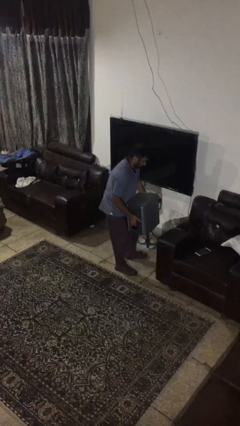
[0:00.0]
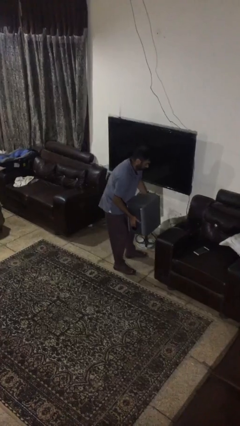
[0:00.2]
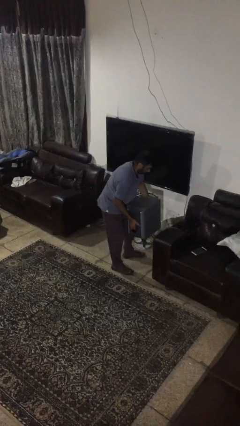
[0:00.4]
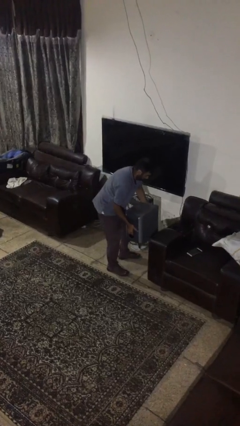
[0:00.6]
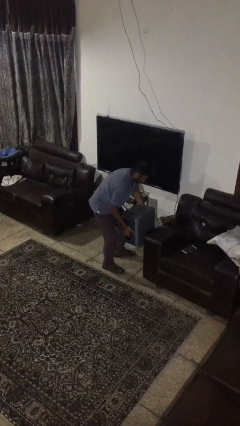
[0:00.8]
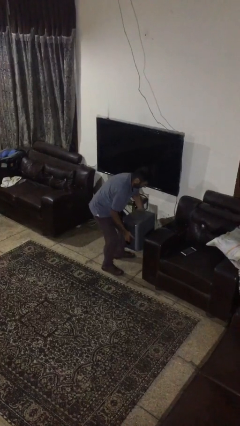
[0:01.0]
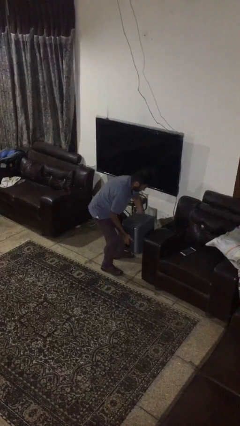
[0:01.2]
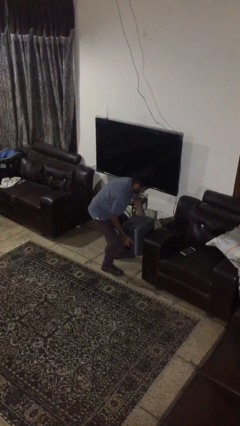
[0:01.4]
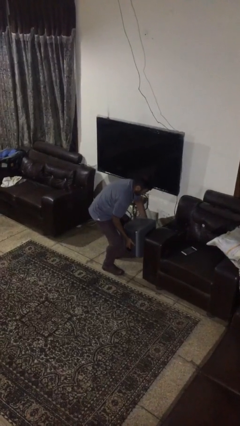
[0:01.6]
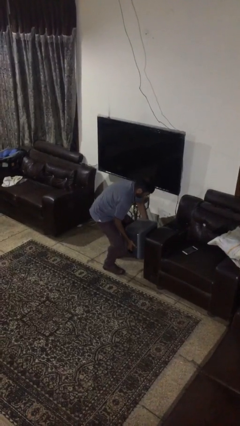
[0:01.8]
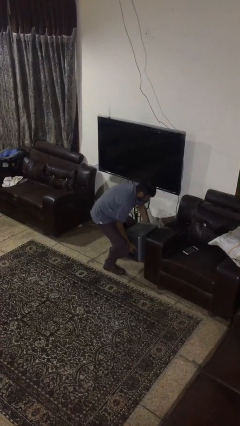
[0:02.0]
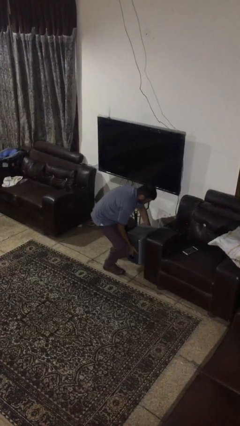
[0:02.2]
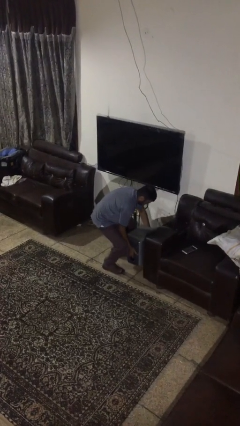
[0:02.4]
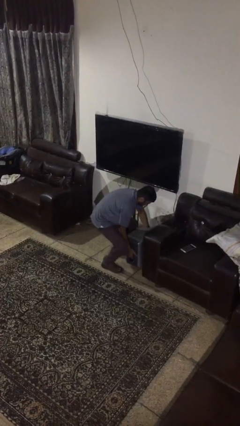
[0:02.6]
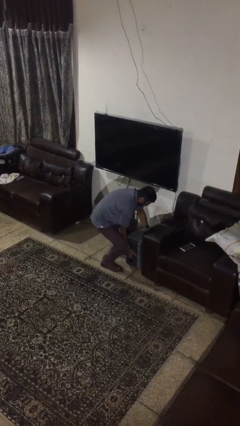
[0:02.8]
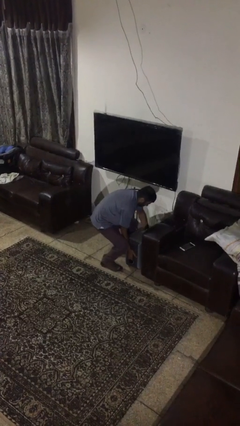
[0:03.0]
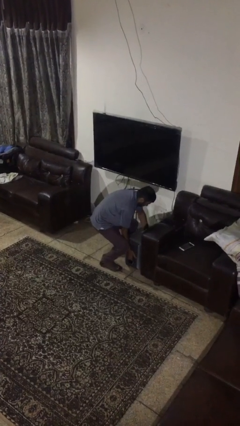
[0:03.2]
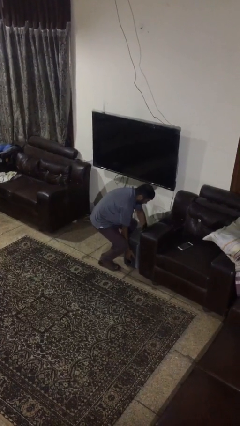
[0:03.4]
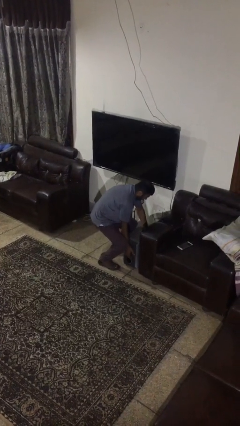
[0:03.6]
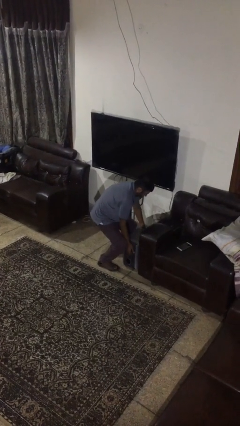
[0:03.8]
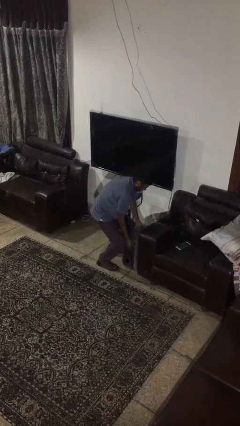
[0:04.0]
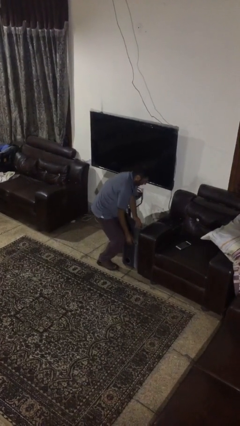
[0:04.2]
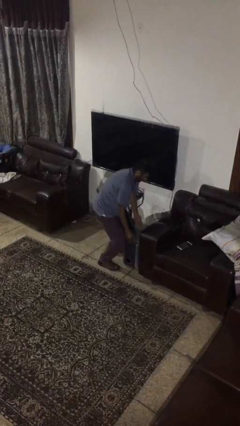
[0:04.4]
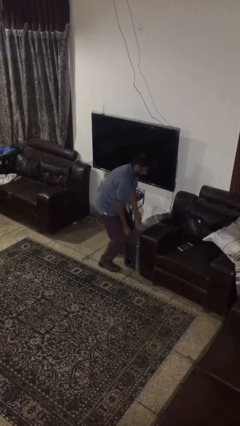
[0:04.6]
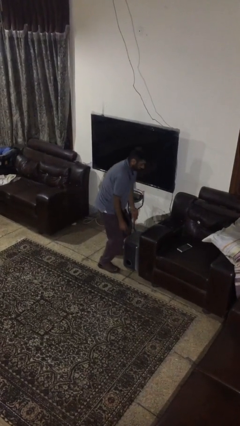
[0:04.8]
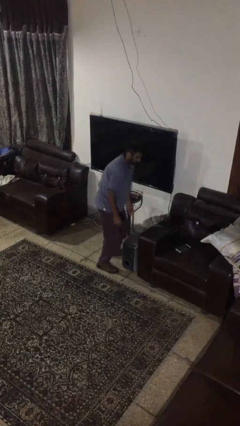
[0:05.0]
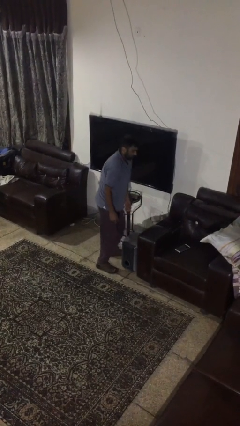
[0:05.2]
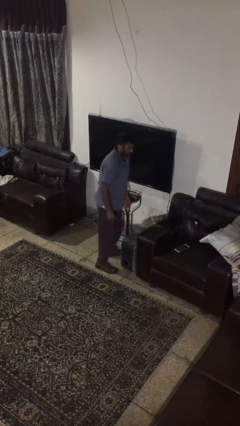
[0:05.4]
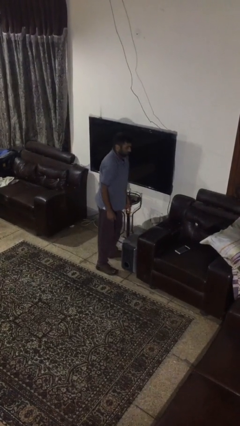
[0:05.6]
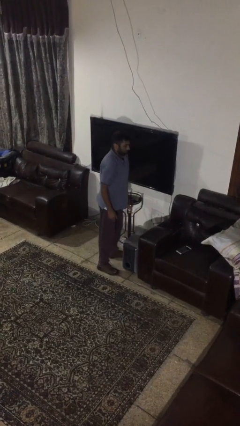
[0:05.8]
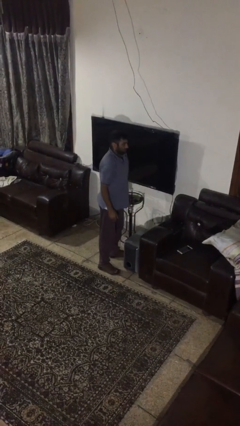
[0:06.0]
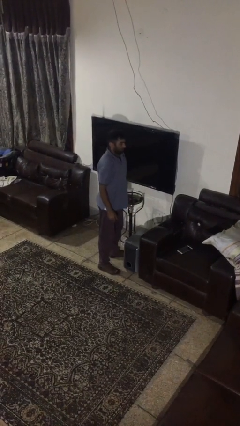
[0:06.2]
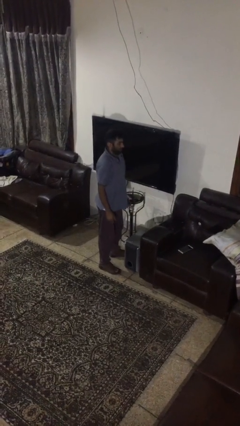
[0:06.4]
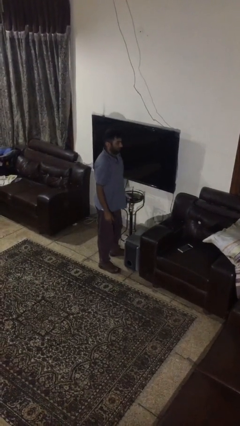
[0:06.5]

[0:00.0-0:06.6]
person puts down object on floor

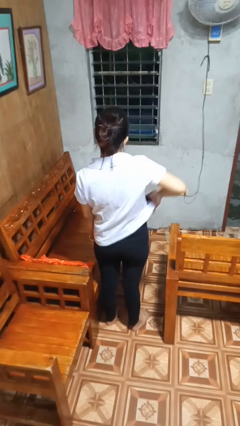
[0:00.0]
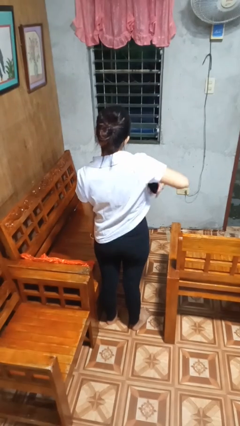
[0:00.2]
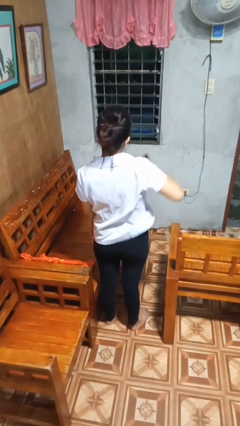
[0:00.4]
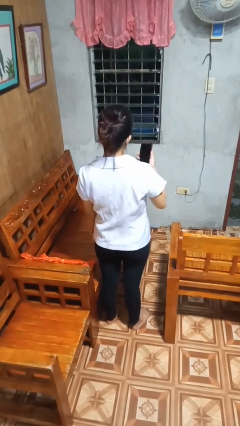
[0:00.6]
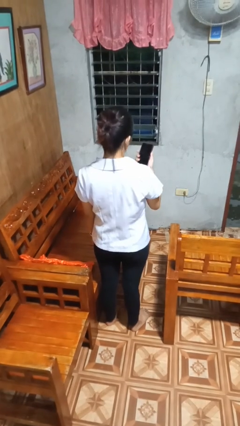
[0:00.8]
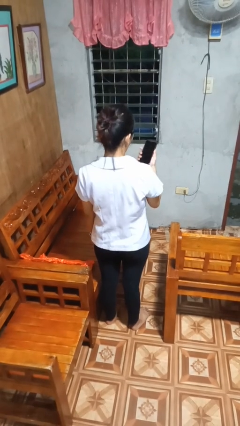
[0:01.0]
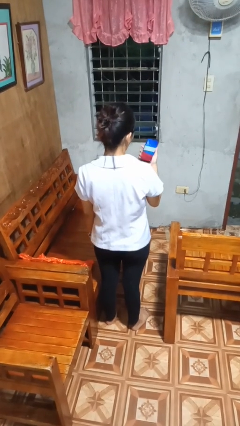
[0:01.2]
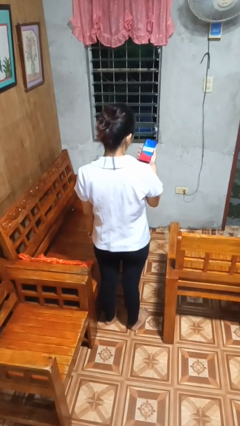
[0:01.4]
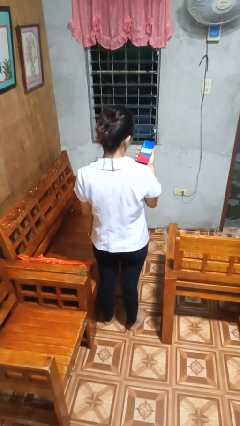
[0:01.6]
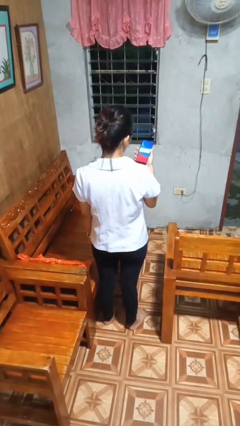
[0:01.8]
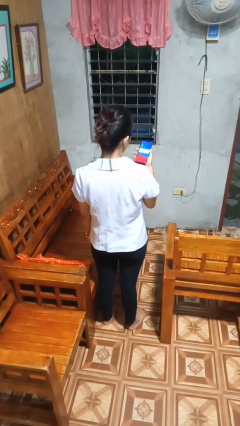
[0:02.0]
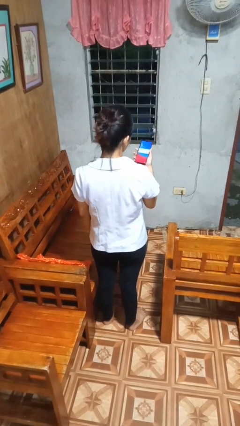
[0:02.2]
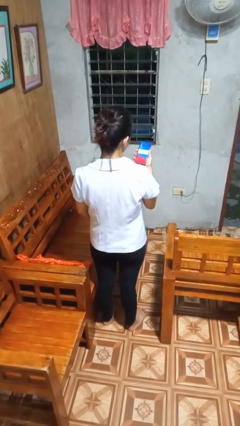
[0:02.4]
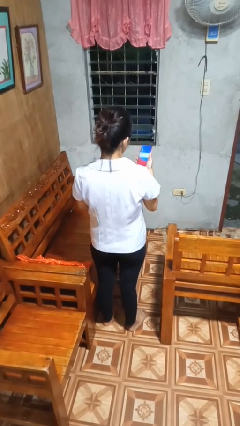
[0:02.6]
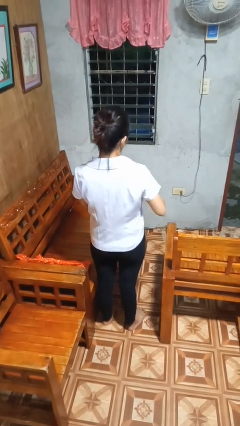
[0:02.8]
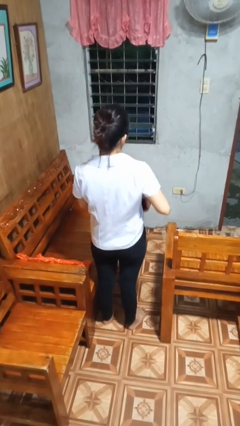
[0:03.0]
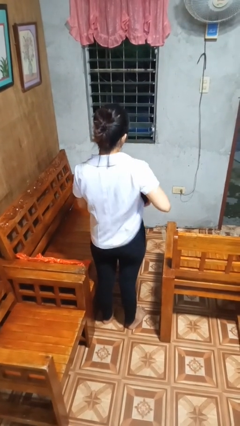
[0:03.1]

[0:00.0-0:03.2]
person takes phone from pocket

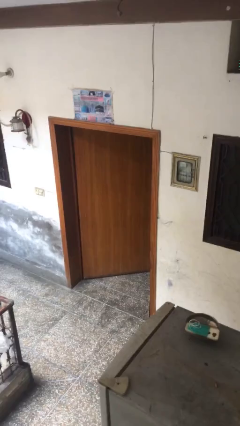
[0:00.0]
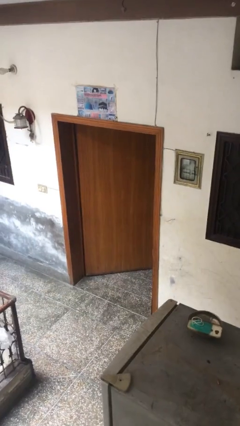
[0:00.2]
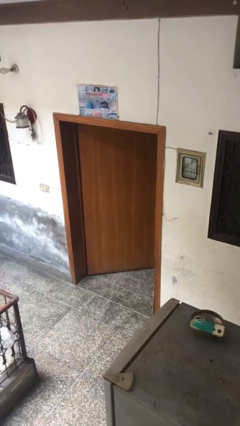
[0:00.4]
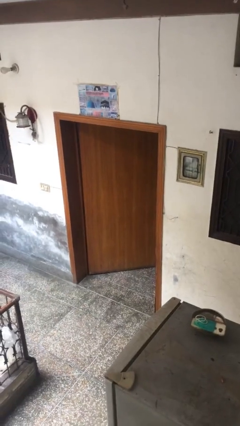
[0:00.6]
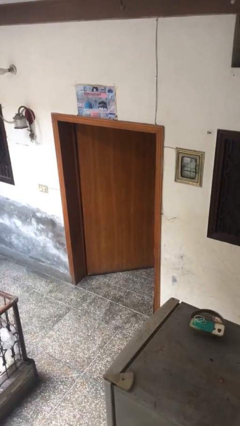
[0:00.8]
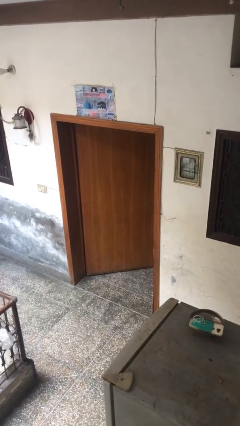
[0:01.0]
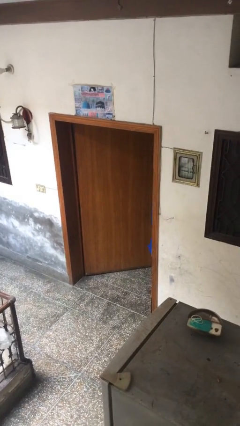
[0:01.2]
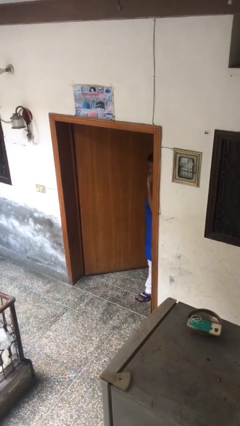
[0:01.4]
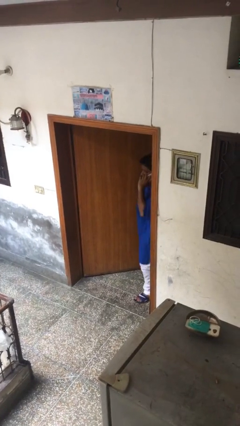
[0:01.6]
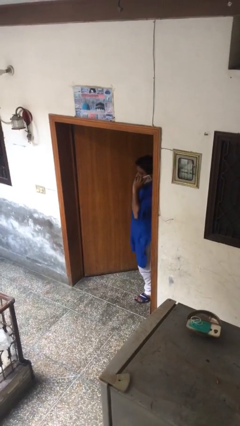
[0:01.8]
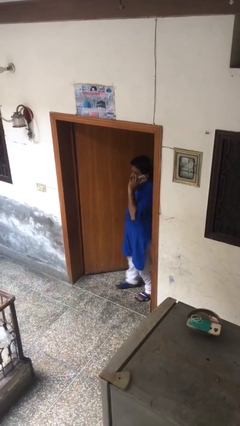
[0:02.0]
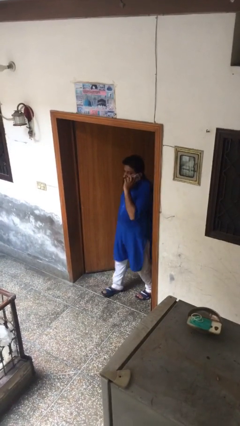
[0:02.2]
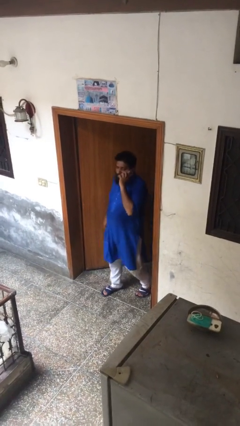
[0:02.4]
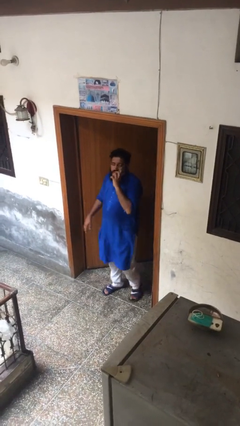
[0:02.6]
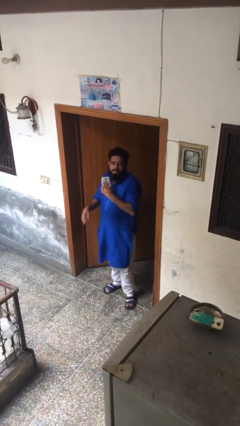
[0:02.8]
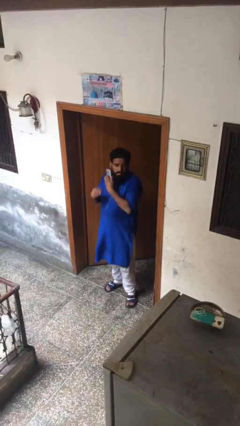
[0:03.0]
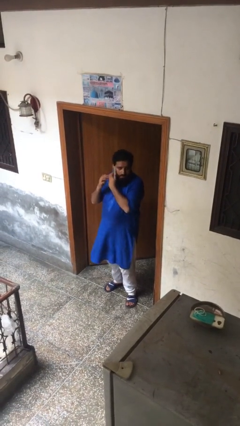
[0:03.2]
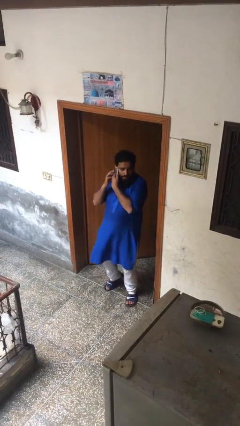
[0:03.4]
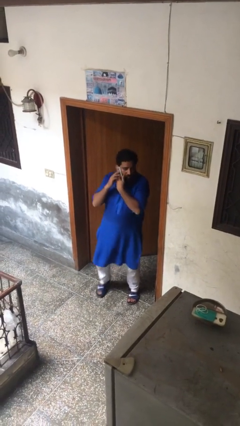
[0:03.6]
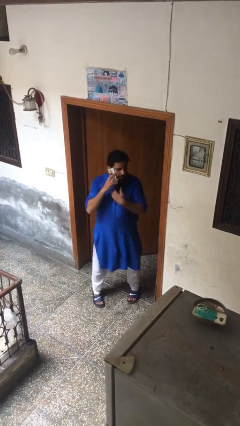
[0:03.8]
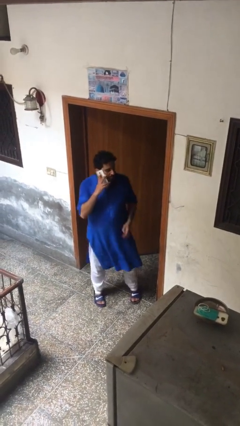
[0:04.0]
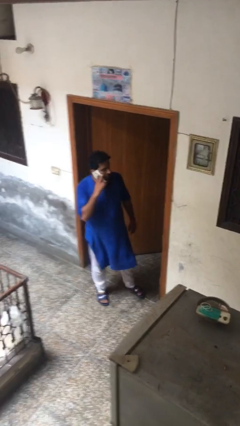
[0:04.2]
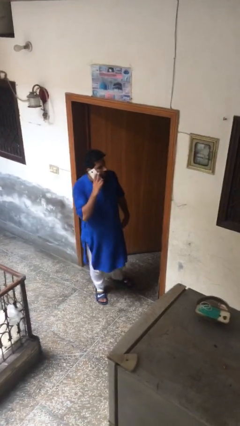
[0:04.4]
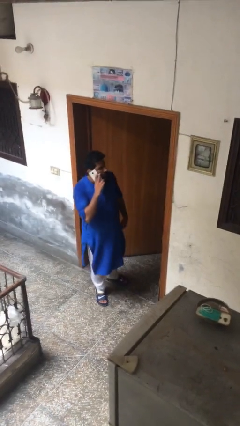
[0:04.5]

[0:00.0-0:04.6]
person enters scene through structure

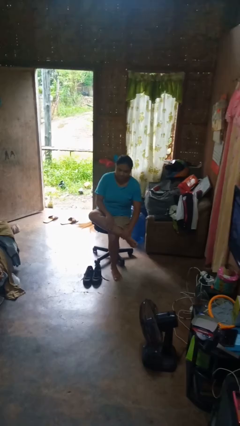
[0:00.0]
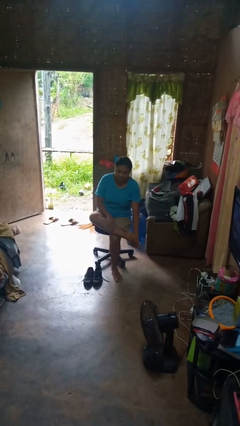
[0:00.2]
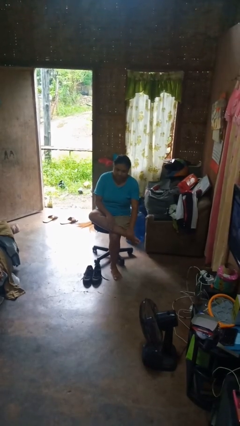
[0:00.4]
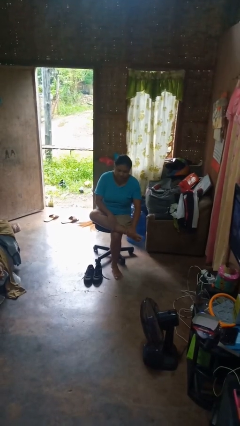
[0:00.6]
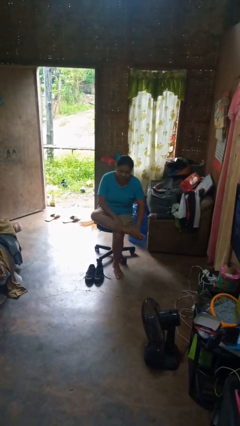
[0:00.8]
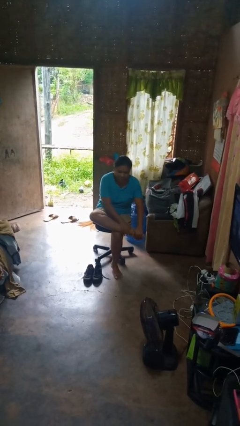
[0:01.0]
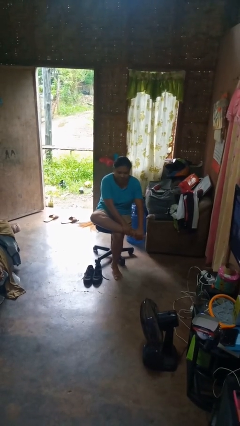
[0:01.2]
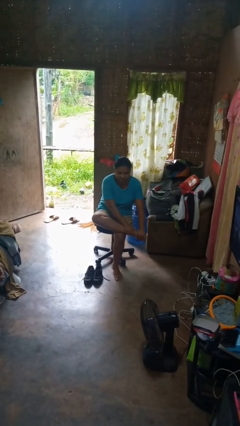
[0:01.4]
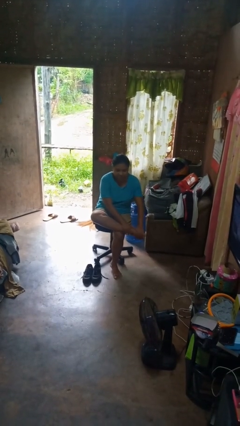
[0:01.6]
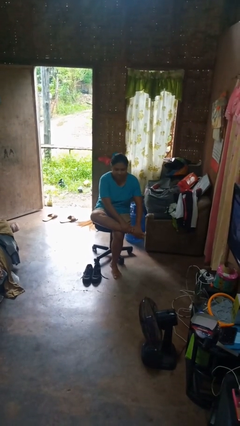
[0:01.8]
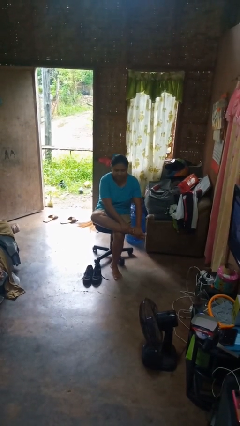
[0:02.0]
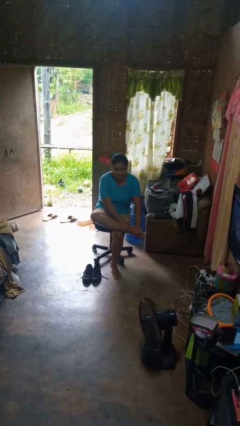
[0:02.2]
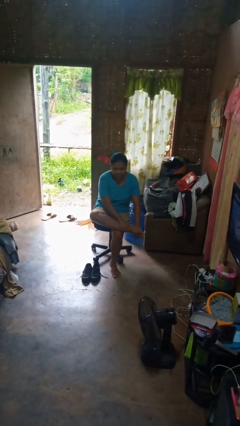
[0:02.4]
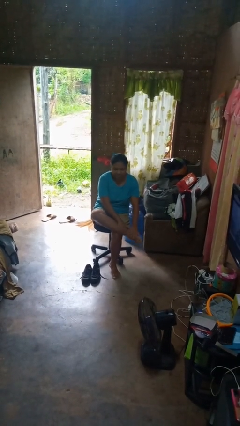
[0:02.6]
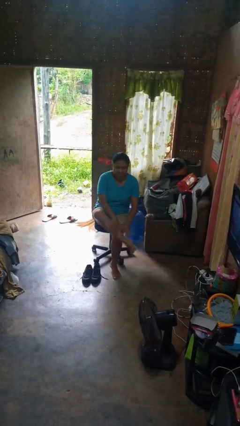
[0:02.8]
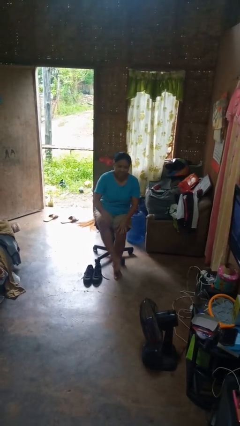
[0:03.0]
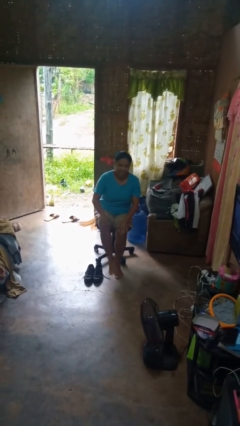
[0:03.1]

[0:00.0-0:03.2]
person rubs foot

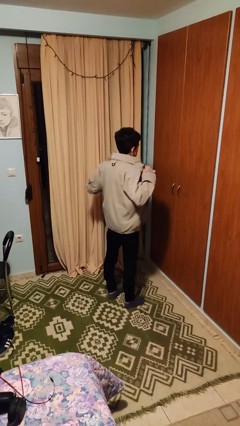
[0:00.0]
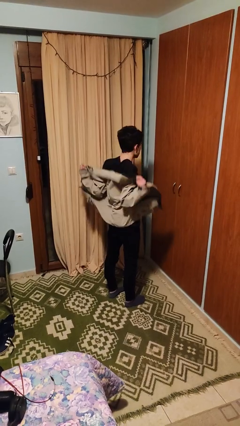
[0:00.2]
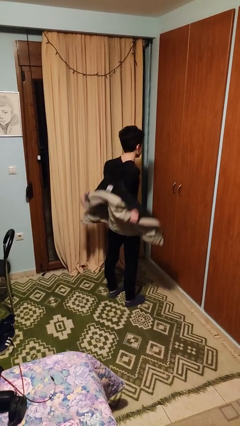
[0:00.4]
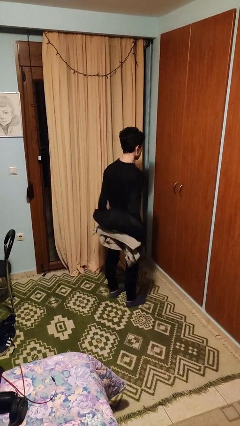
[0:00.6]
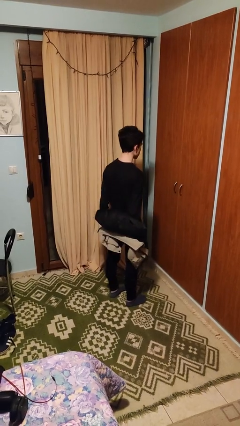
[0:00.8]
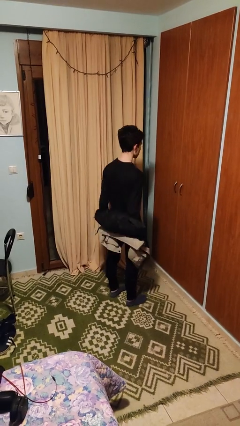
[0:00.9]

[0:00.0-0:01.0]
person takes off jacket
